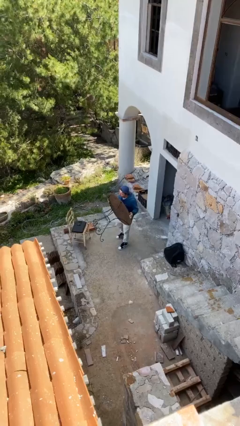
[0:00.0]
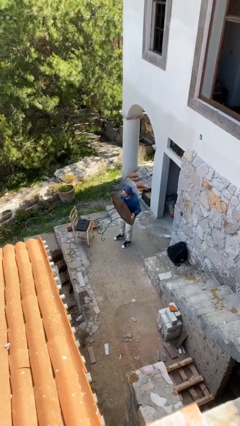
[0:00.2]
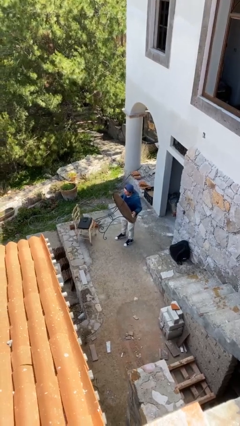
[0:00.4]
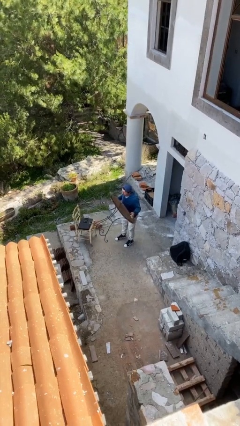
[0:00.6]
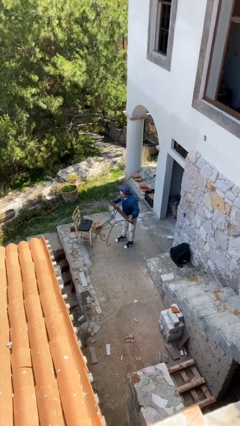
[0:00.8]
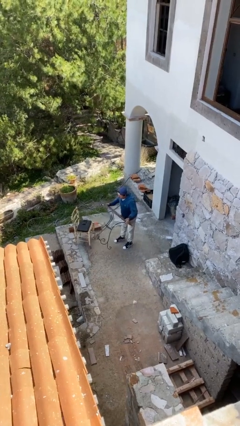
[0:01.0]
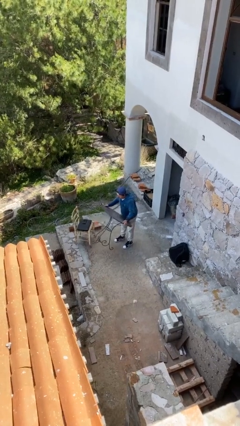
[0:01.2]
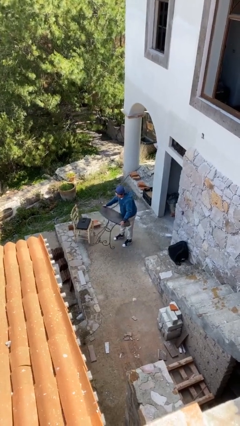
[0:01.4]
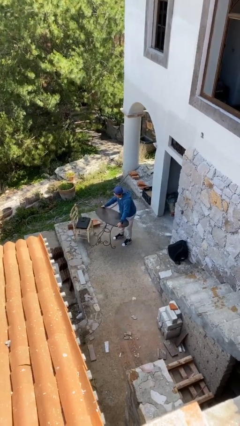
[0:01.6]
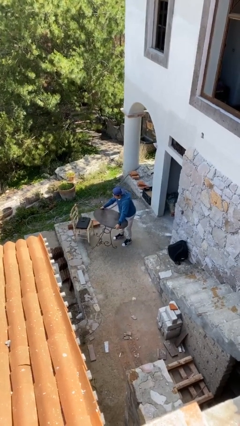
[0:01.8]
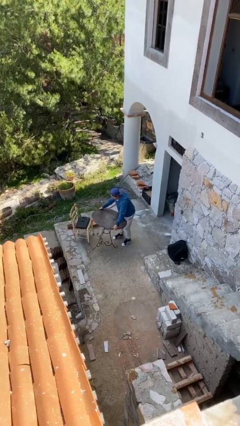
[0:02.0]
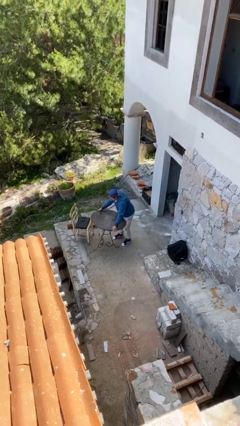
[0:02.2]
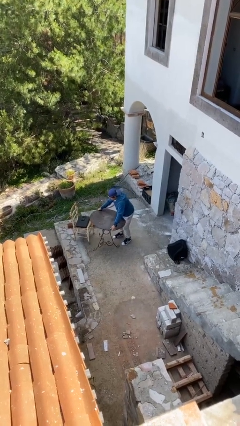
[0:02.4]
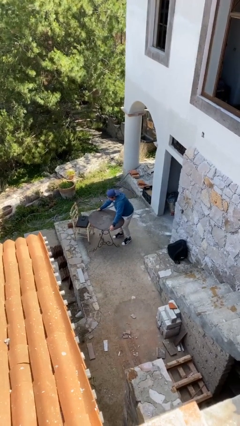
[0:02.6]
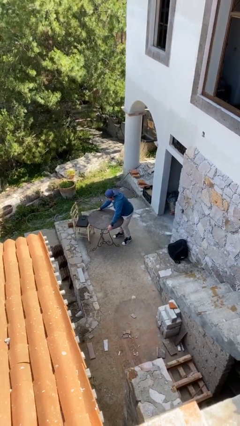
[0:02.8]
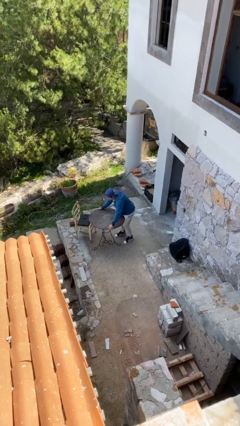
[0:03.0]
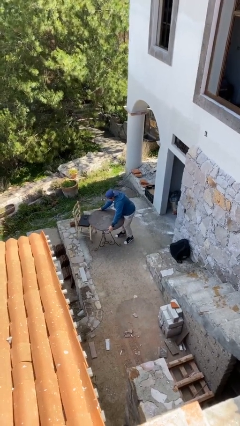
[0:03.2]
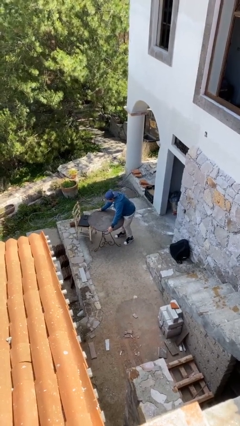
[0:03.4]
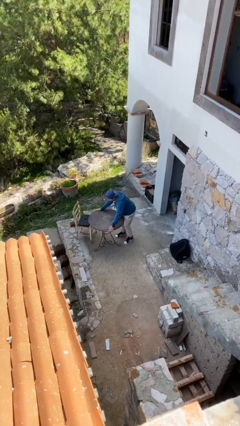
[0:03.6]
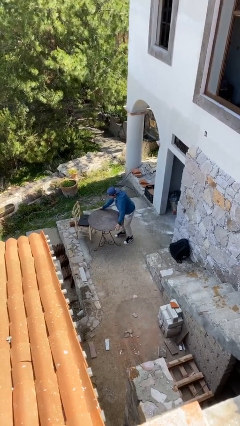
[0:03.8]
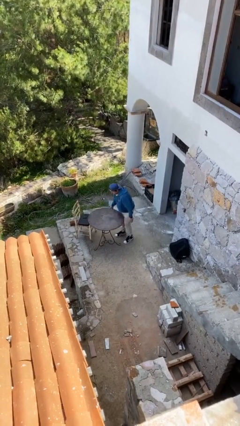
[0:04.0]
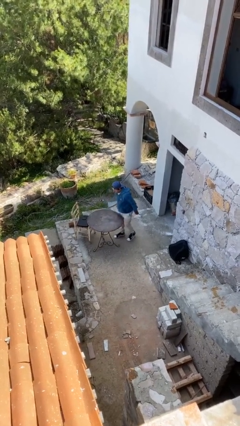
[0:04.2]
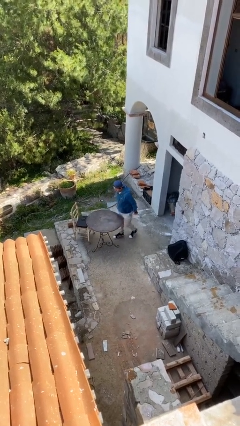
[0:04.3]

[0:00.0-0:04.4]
person puts down object on floor

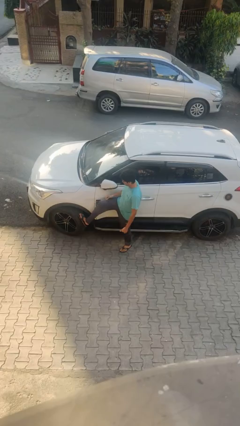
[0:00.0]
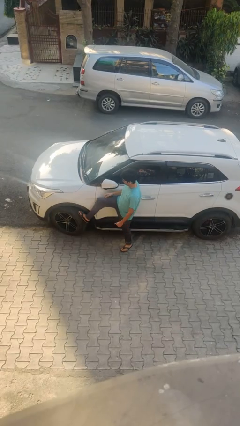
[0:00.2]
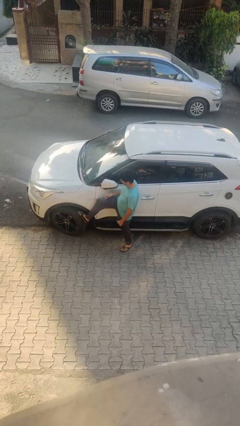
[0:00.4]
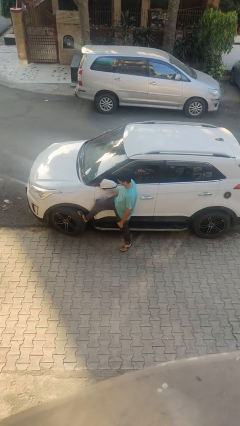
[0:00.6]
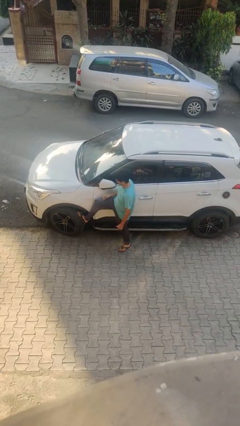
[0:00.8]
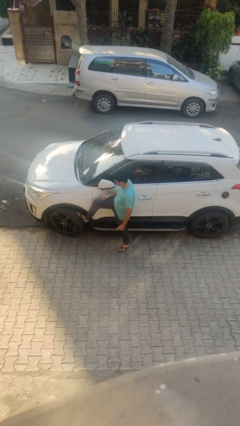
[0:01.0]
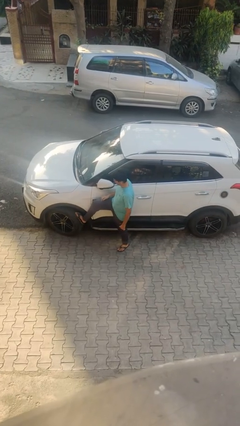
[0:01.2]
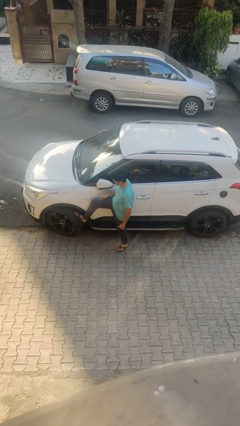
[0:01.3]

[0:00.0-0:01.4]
person kicks car tires

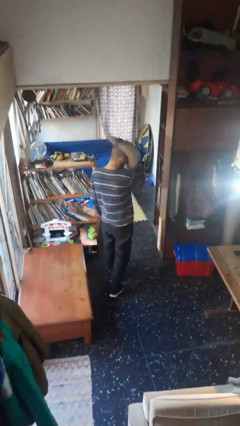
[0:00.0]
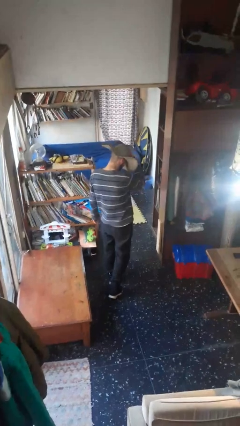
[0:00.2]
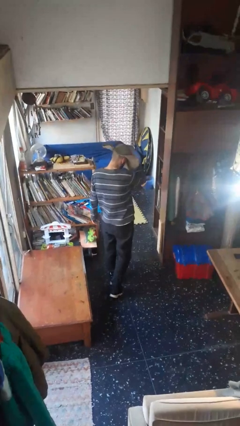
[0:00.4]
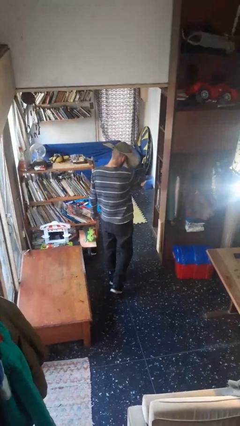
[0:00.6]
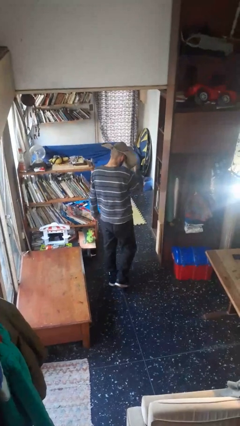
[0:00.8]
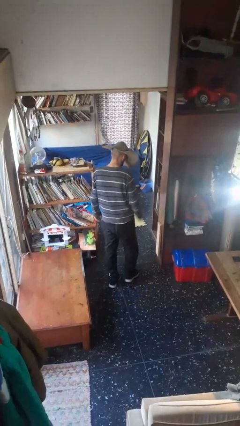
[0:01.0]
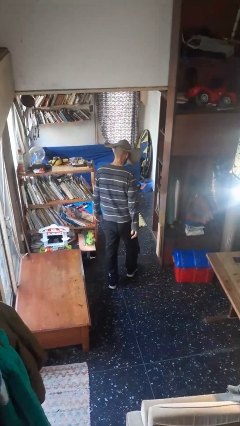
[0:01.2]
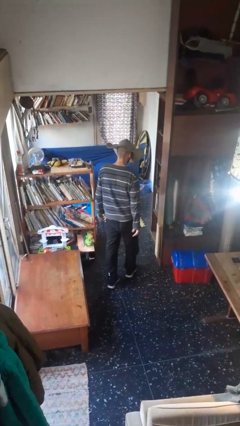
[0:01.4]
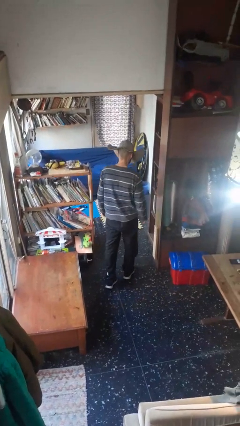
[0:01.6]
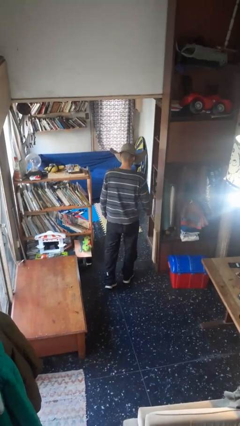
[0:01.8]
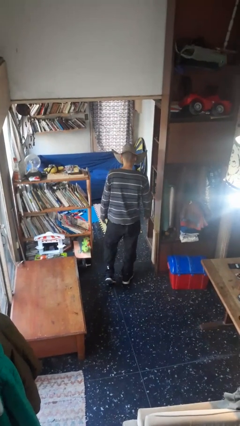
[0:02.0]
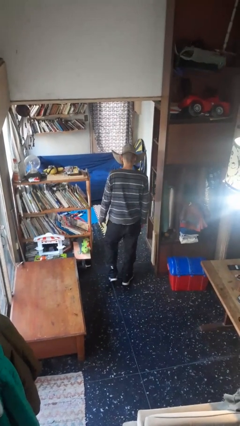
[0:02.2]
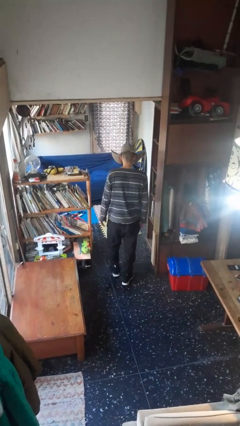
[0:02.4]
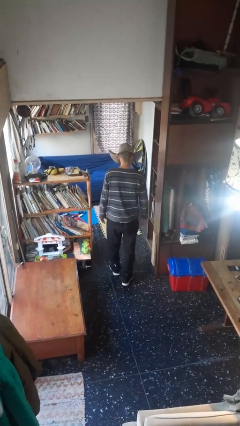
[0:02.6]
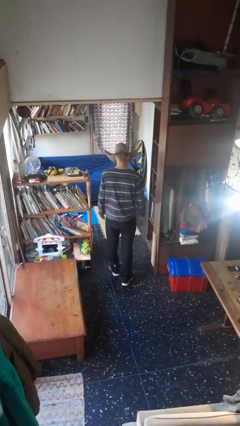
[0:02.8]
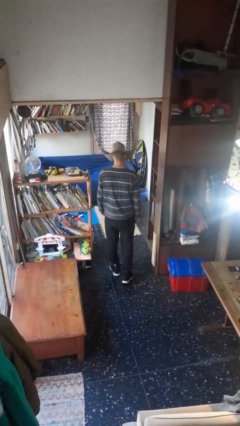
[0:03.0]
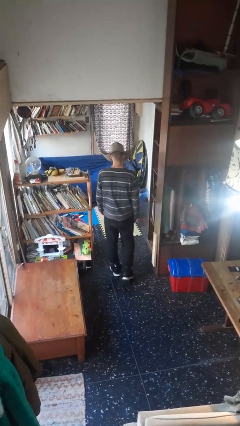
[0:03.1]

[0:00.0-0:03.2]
person puts on hat

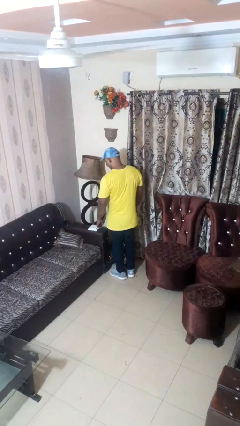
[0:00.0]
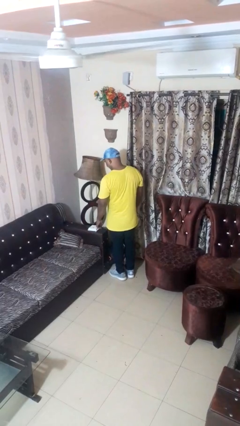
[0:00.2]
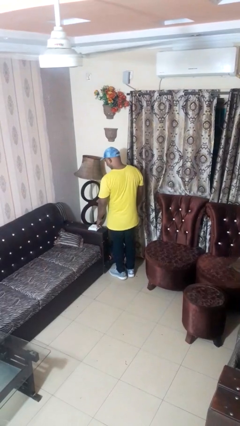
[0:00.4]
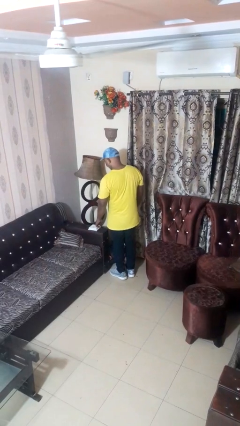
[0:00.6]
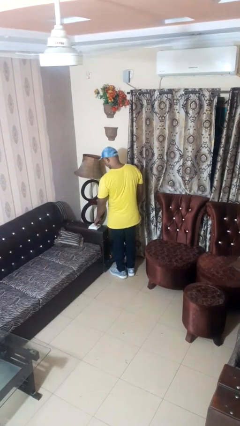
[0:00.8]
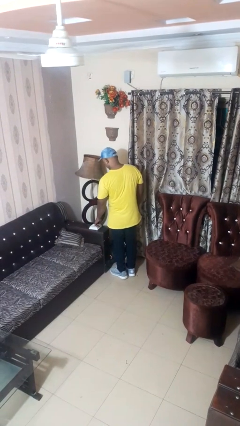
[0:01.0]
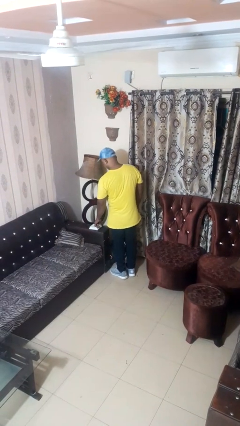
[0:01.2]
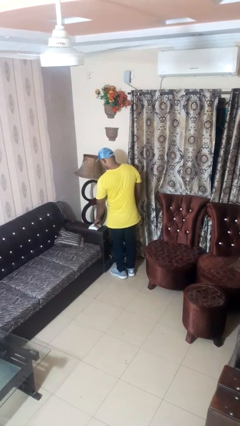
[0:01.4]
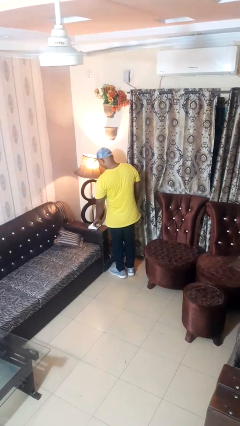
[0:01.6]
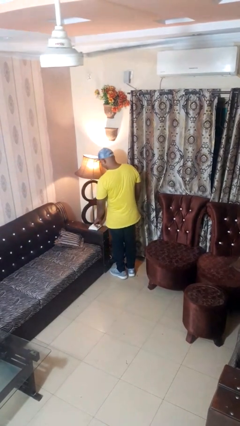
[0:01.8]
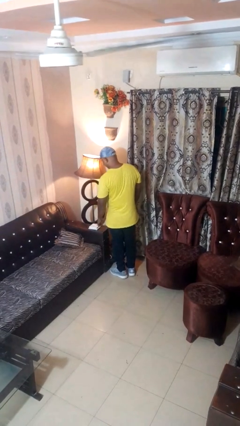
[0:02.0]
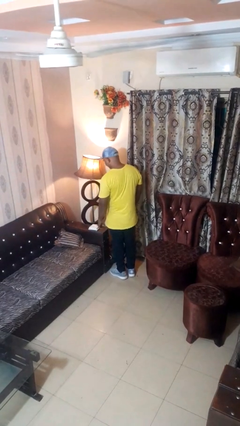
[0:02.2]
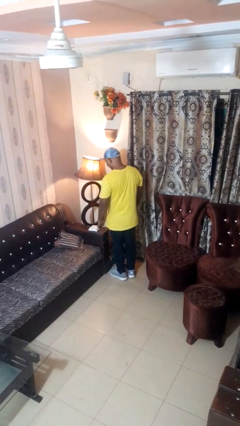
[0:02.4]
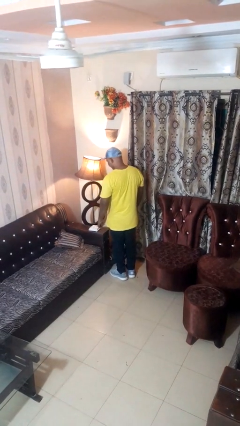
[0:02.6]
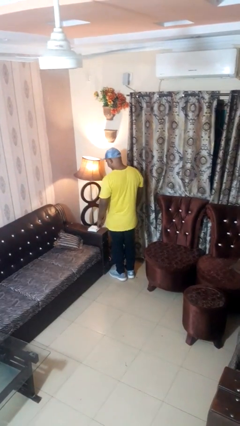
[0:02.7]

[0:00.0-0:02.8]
person turns on lamp

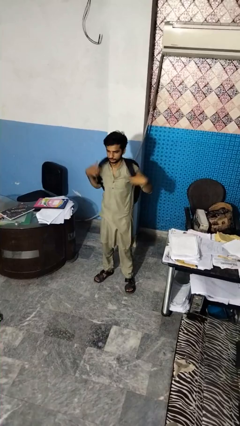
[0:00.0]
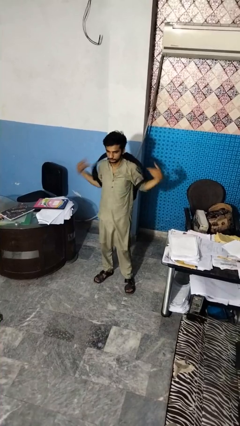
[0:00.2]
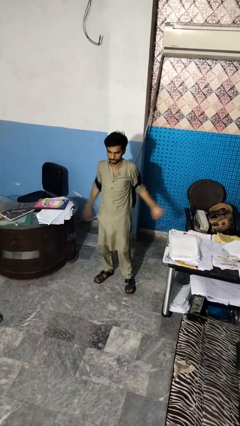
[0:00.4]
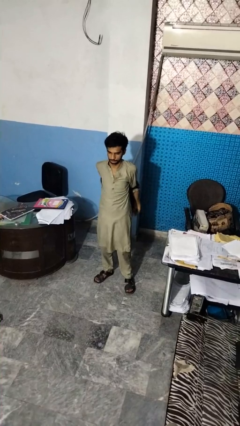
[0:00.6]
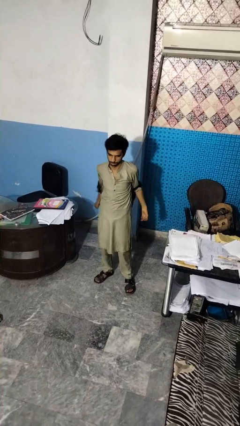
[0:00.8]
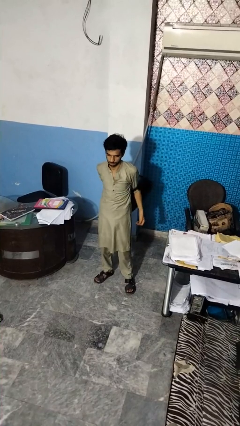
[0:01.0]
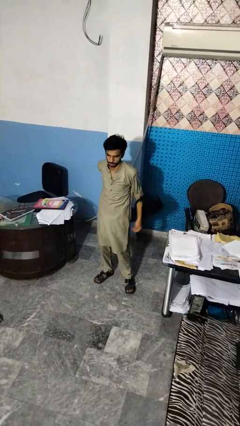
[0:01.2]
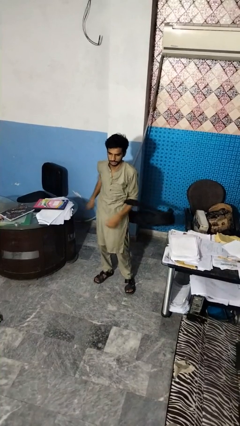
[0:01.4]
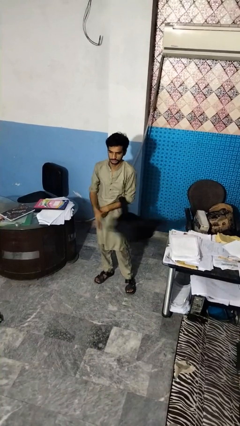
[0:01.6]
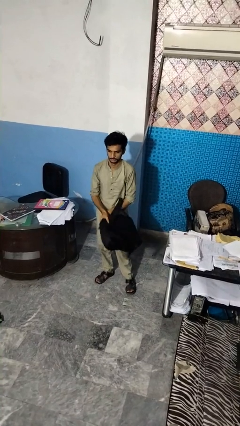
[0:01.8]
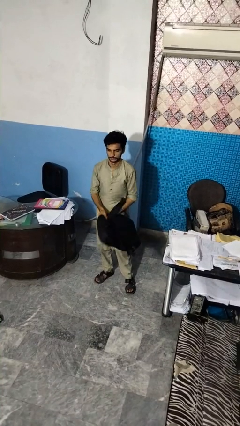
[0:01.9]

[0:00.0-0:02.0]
person takes off backpack

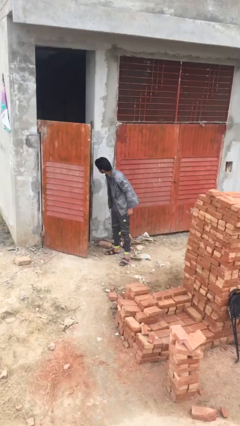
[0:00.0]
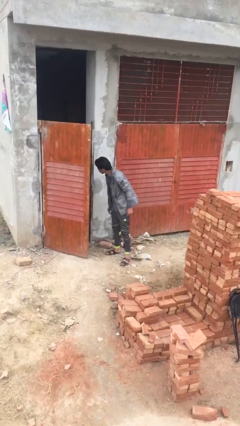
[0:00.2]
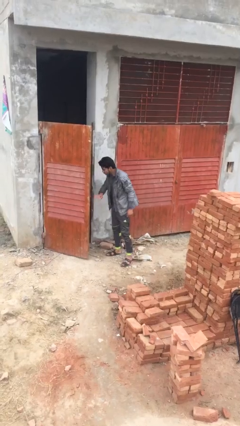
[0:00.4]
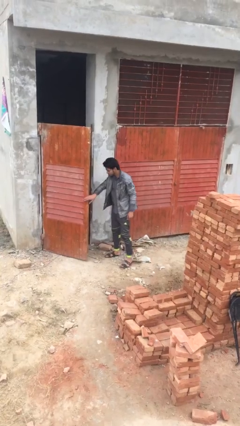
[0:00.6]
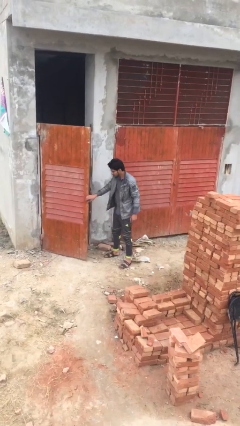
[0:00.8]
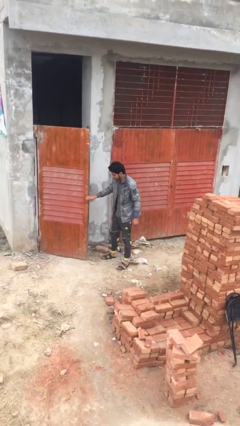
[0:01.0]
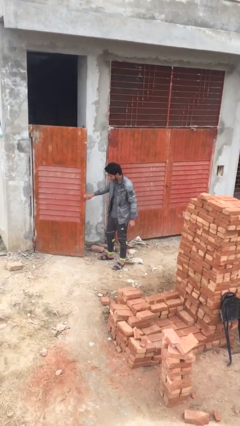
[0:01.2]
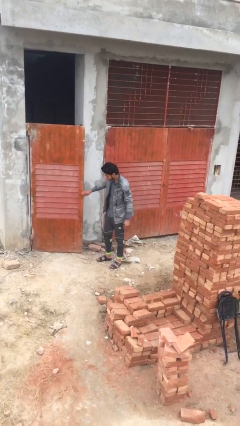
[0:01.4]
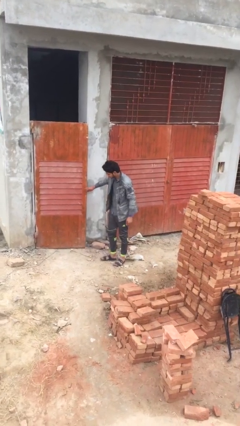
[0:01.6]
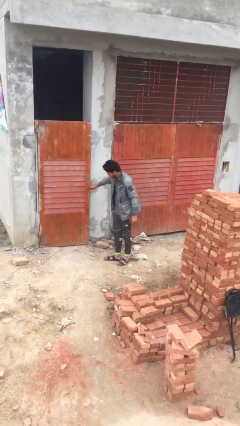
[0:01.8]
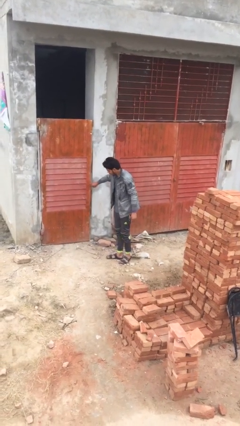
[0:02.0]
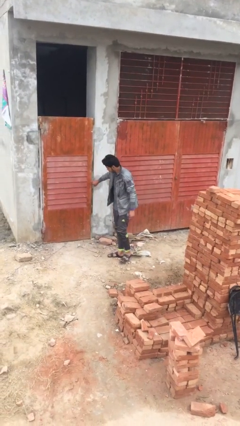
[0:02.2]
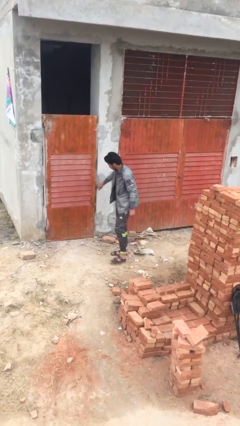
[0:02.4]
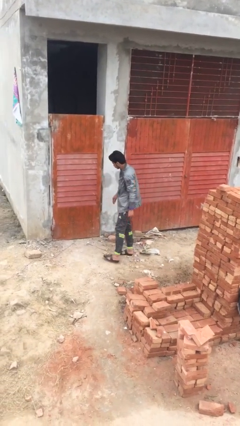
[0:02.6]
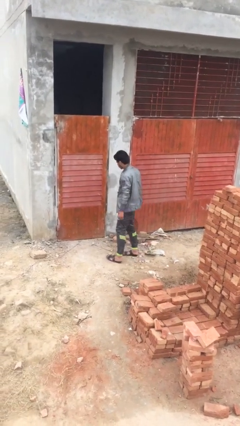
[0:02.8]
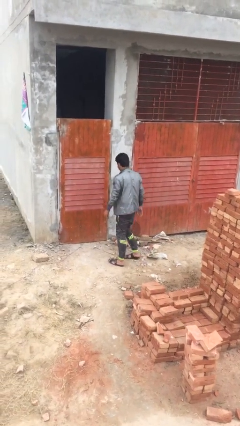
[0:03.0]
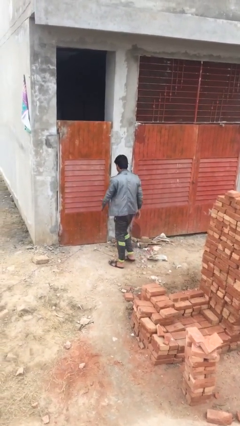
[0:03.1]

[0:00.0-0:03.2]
person closes facility door

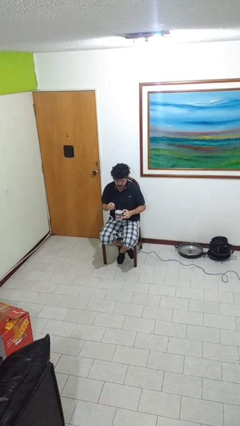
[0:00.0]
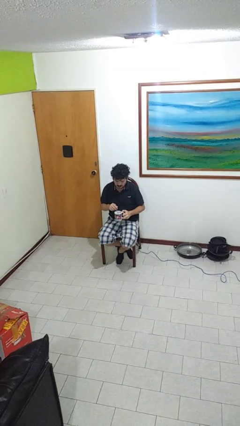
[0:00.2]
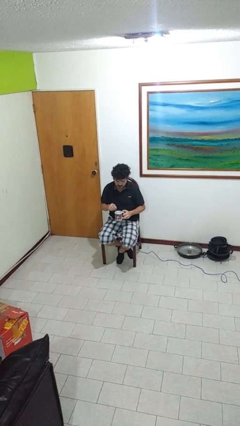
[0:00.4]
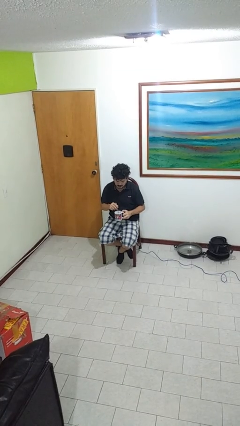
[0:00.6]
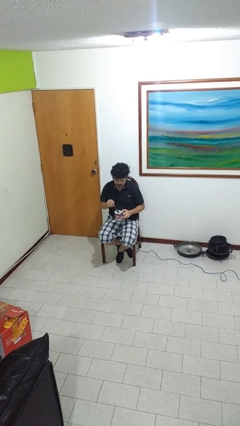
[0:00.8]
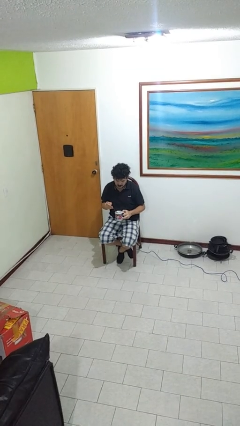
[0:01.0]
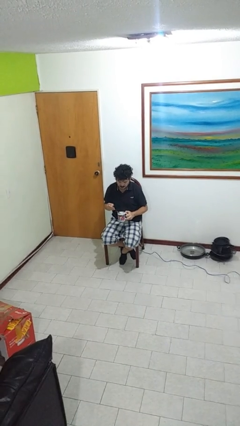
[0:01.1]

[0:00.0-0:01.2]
person stirs mug
